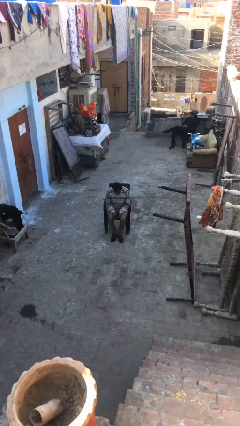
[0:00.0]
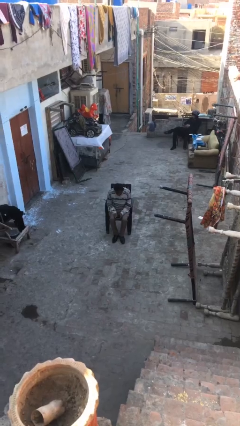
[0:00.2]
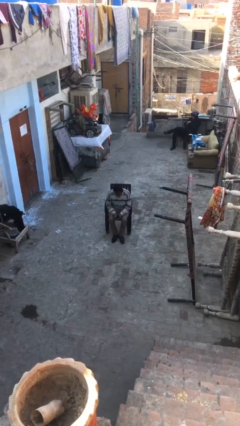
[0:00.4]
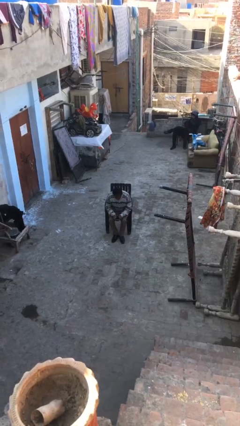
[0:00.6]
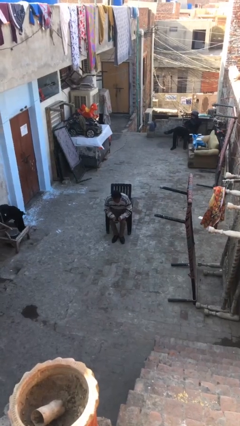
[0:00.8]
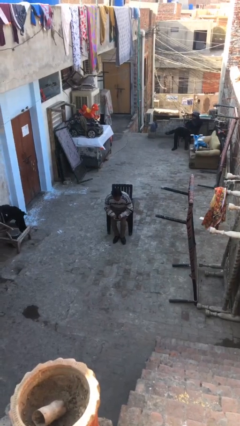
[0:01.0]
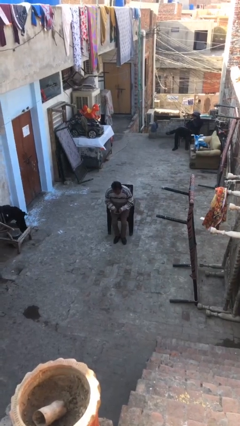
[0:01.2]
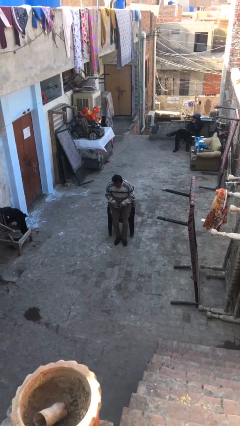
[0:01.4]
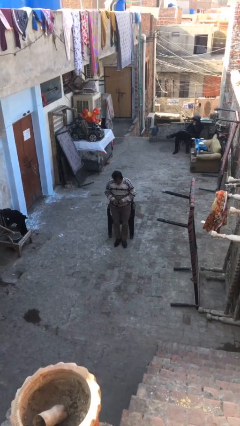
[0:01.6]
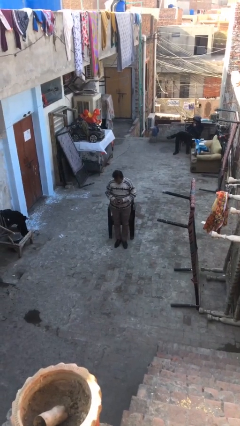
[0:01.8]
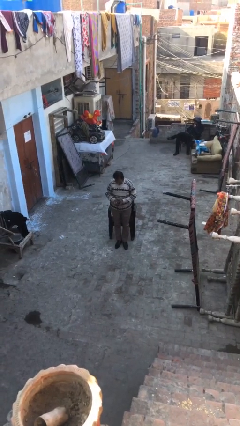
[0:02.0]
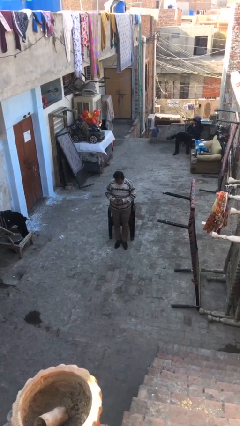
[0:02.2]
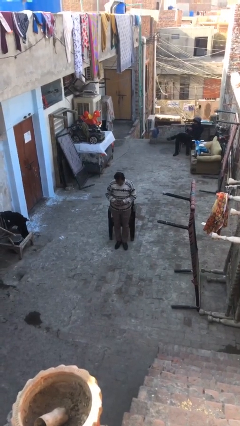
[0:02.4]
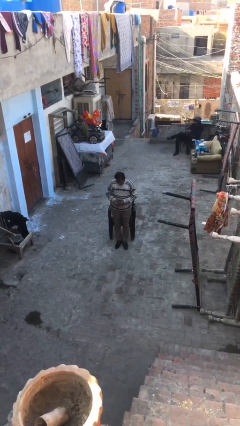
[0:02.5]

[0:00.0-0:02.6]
person stands up

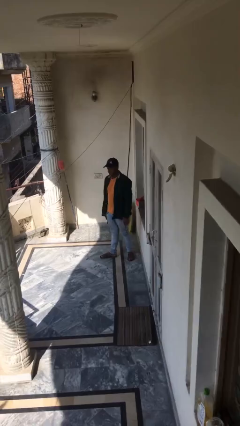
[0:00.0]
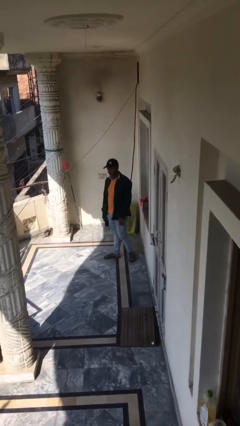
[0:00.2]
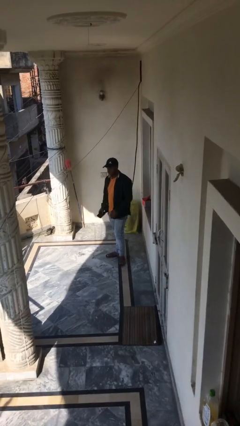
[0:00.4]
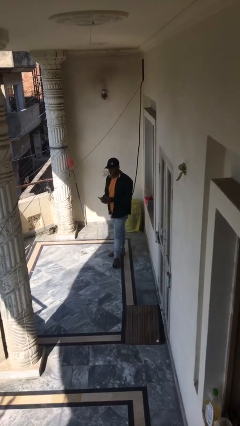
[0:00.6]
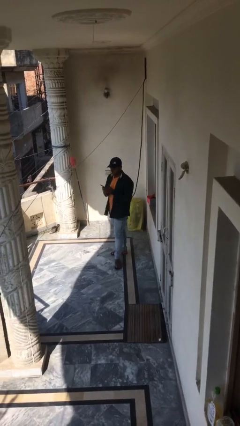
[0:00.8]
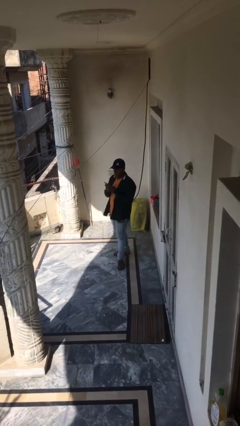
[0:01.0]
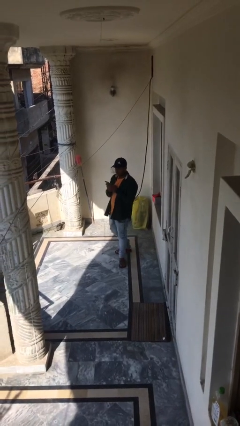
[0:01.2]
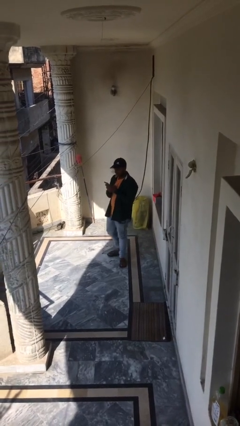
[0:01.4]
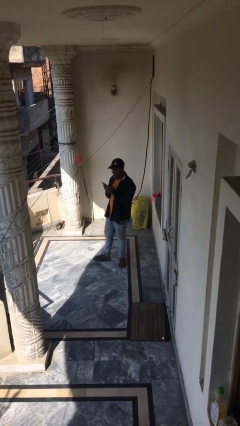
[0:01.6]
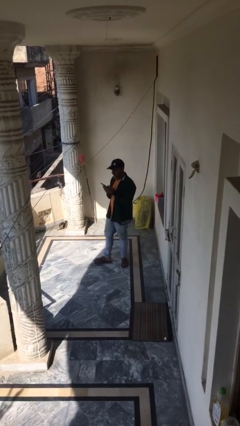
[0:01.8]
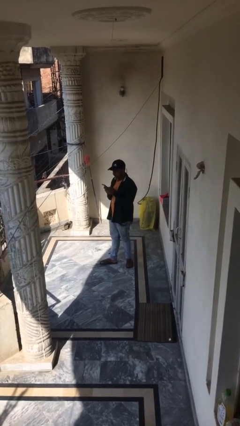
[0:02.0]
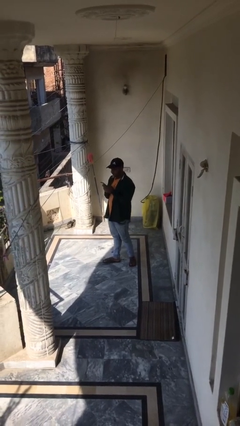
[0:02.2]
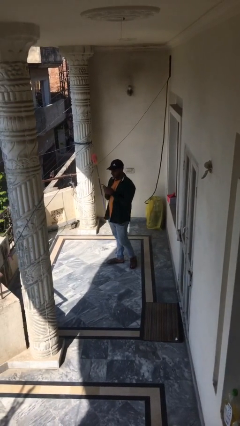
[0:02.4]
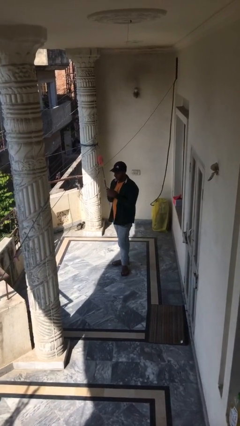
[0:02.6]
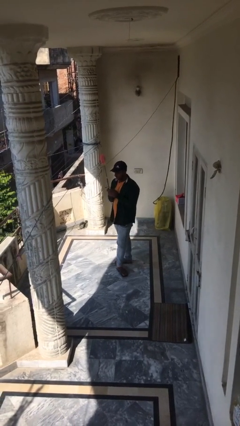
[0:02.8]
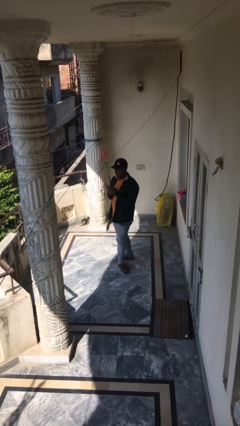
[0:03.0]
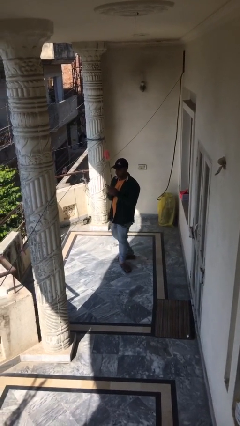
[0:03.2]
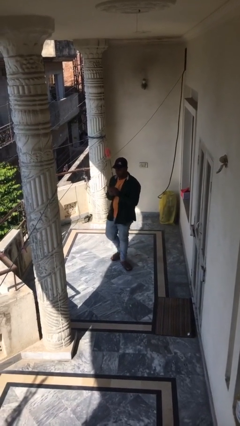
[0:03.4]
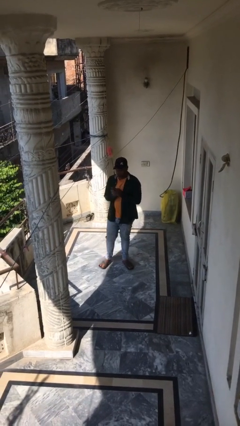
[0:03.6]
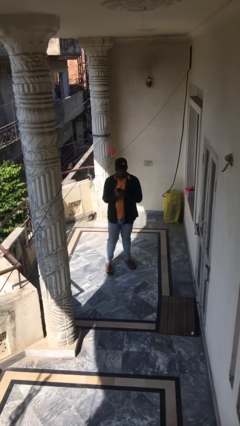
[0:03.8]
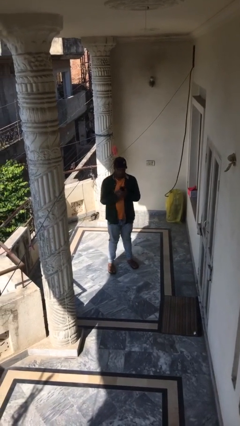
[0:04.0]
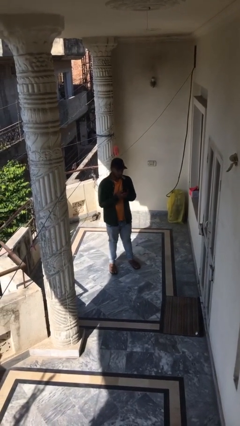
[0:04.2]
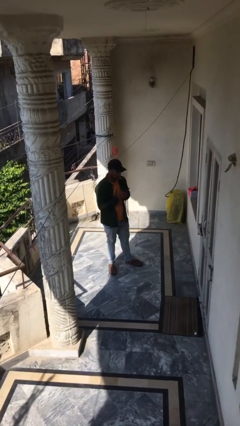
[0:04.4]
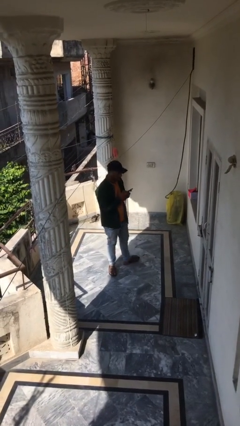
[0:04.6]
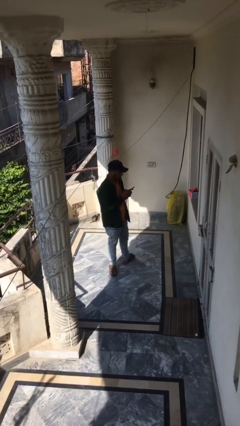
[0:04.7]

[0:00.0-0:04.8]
person texts on phone

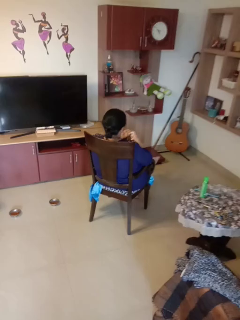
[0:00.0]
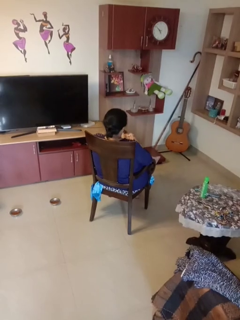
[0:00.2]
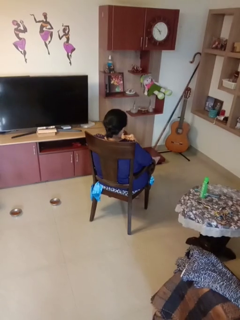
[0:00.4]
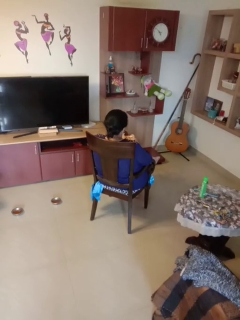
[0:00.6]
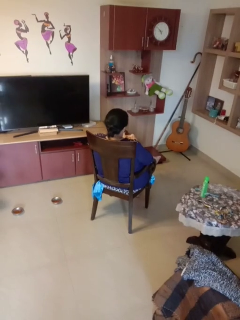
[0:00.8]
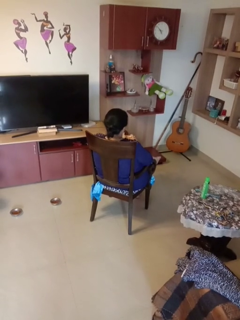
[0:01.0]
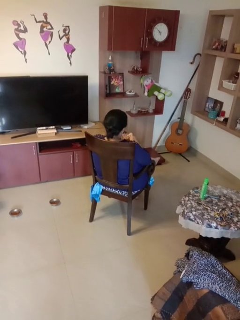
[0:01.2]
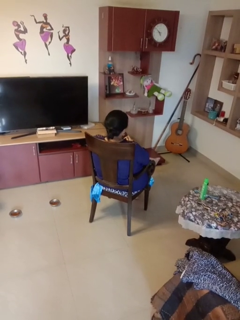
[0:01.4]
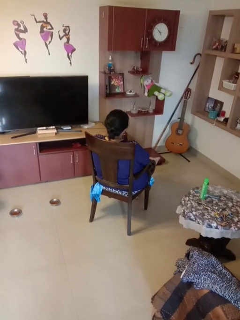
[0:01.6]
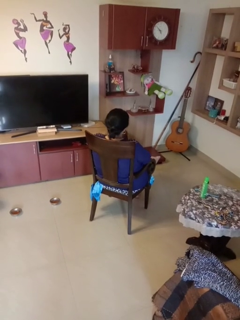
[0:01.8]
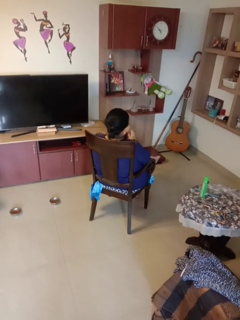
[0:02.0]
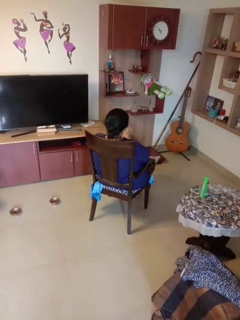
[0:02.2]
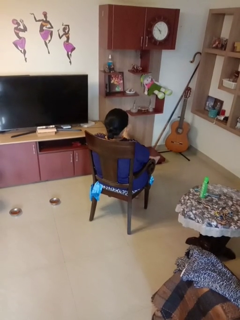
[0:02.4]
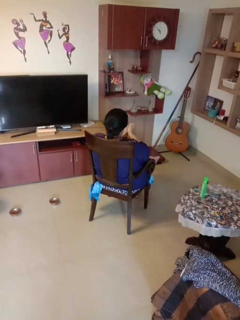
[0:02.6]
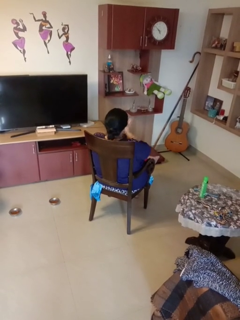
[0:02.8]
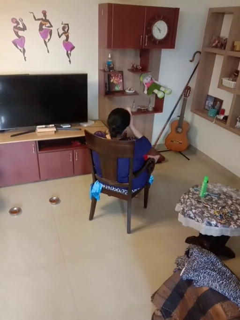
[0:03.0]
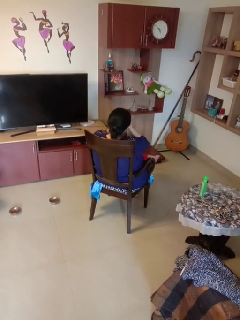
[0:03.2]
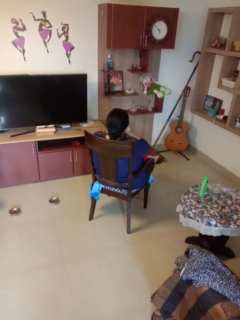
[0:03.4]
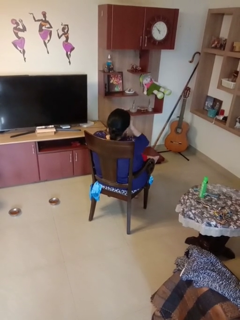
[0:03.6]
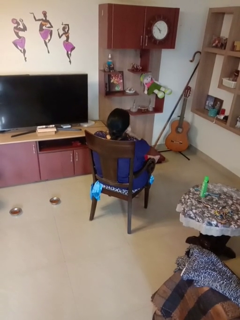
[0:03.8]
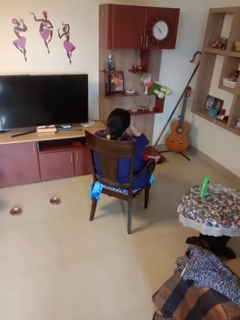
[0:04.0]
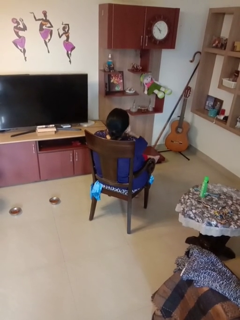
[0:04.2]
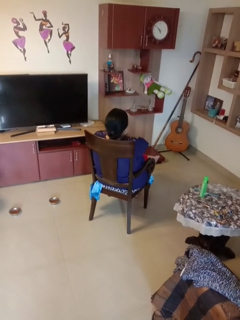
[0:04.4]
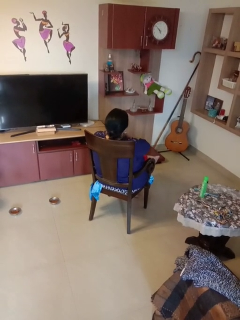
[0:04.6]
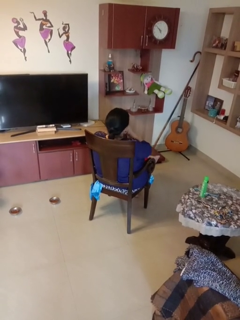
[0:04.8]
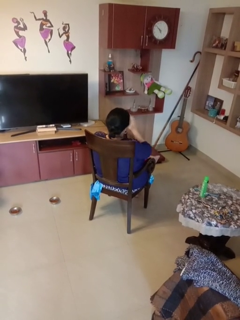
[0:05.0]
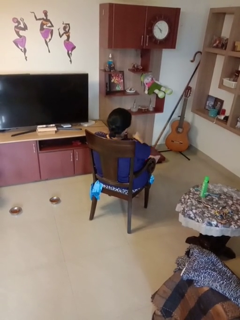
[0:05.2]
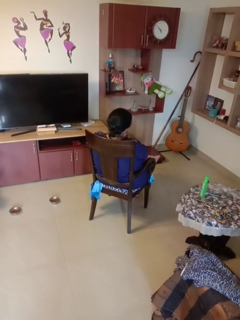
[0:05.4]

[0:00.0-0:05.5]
person applies facial moisturizer

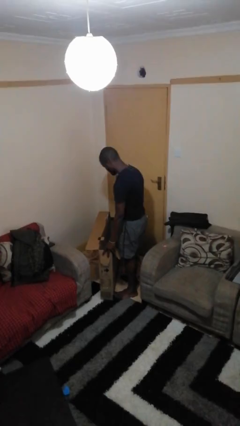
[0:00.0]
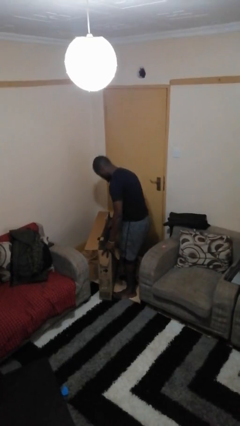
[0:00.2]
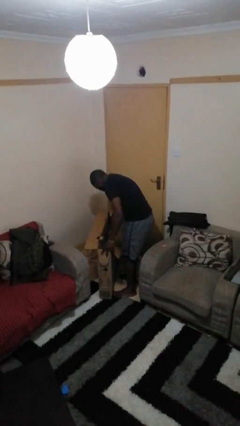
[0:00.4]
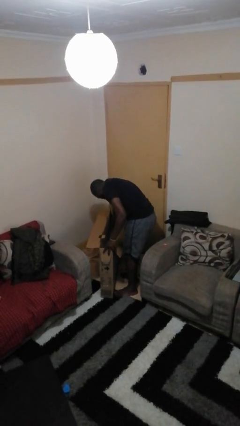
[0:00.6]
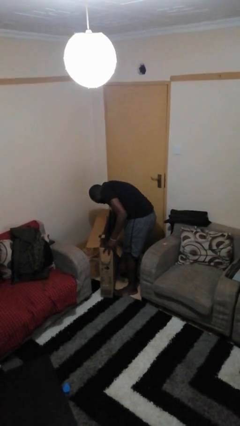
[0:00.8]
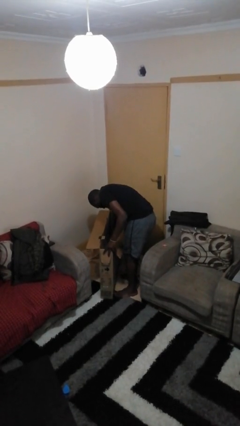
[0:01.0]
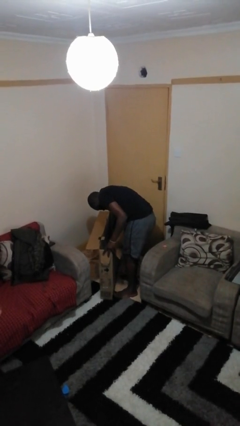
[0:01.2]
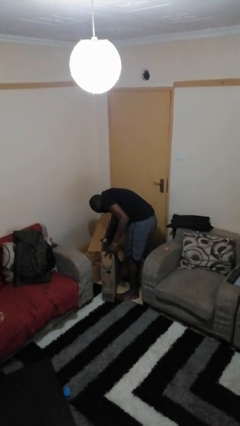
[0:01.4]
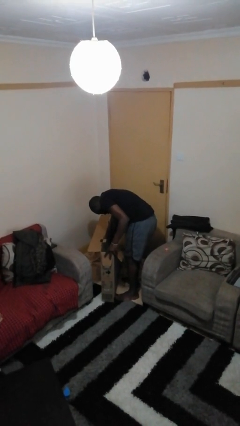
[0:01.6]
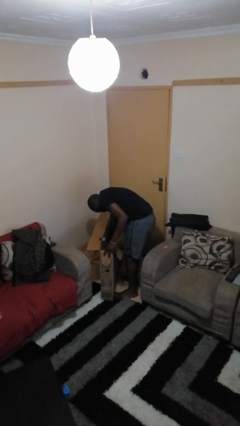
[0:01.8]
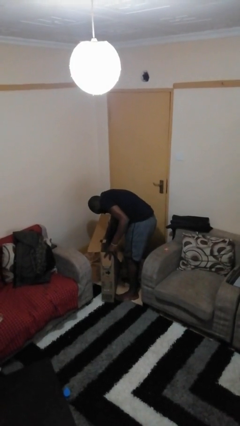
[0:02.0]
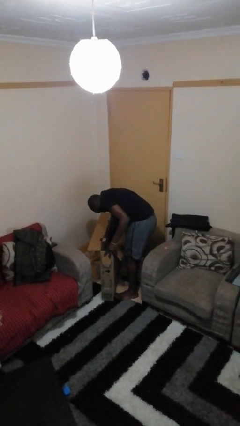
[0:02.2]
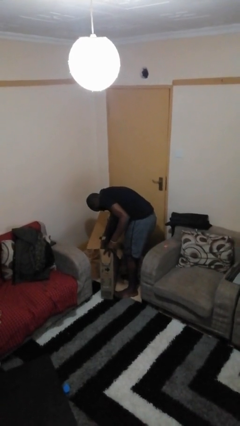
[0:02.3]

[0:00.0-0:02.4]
person searches in box

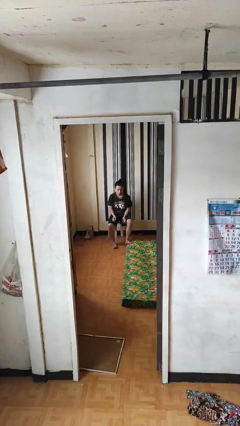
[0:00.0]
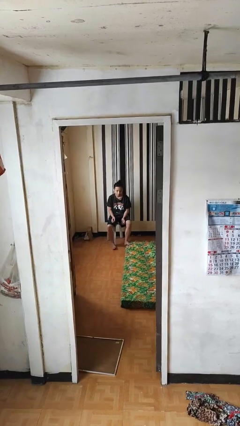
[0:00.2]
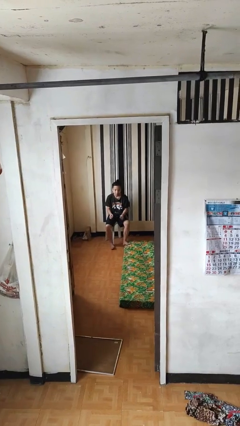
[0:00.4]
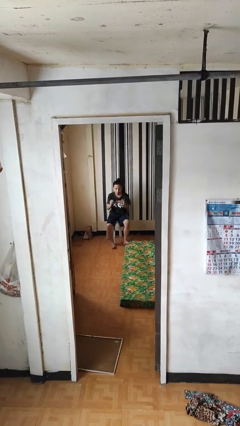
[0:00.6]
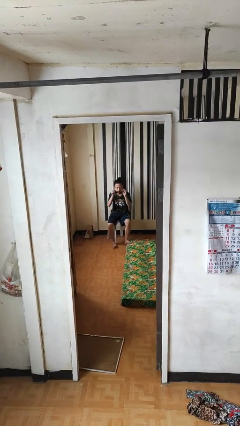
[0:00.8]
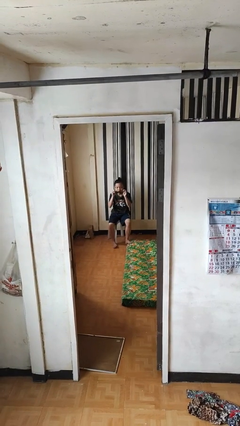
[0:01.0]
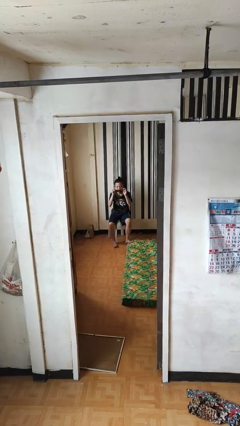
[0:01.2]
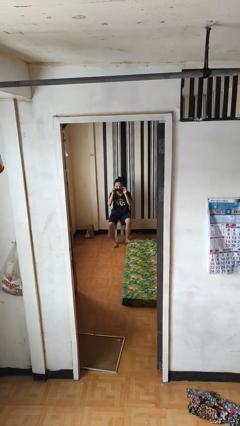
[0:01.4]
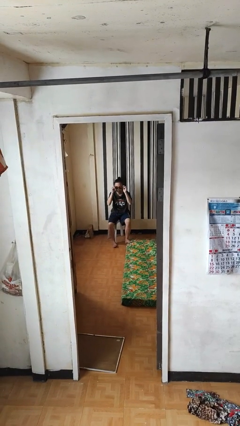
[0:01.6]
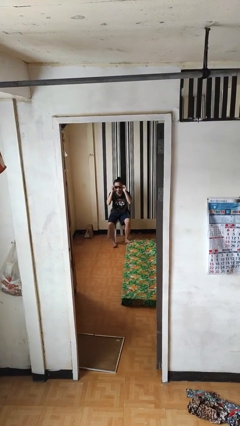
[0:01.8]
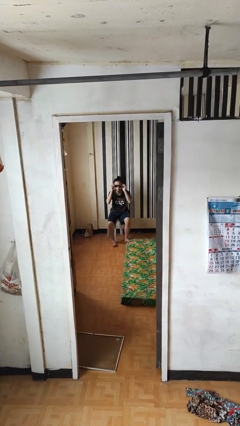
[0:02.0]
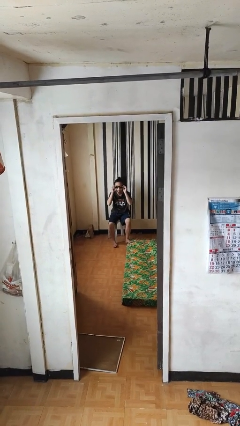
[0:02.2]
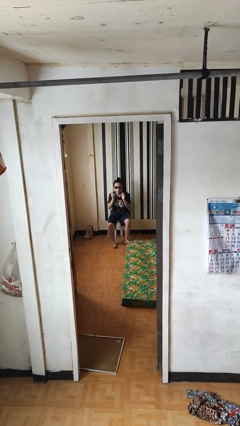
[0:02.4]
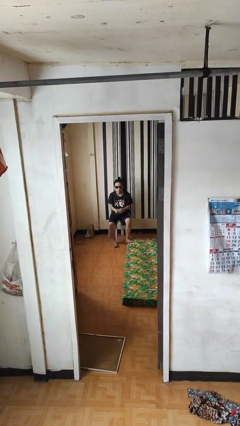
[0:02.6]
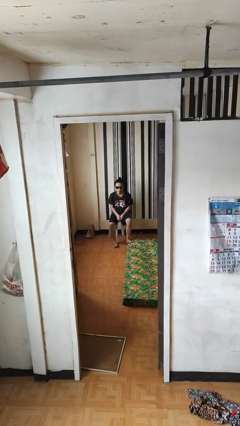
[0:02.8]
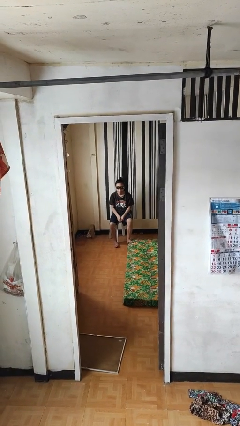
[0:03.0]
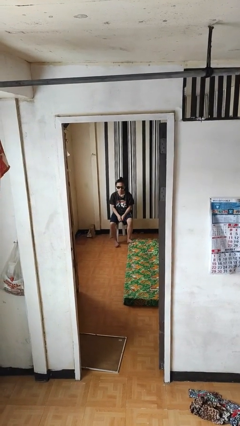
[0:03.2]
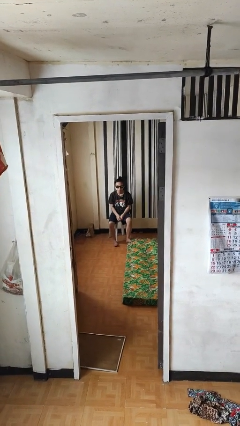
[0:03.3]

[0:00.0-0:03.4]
person puts on sunglasses

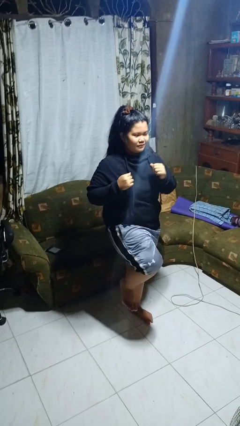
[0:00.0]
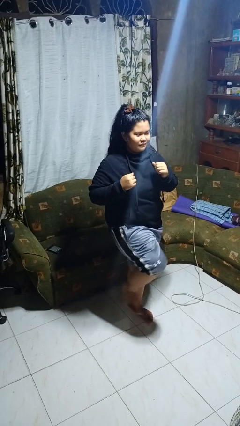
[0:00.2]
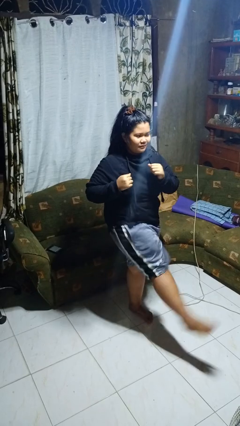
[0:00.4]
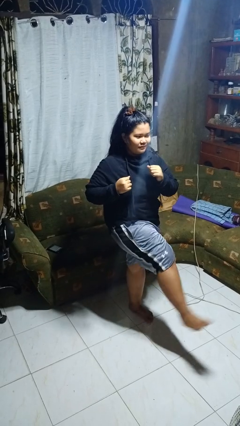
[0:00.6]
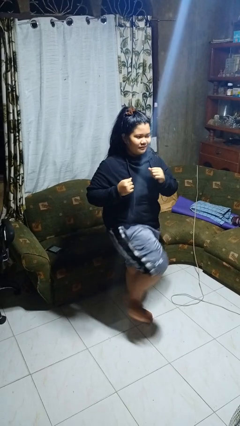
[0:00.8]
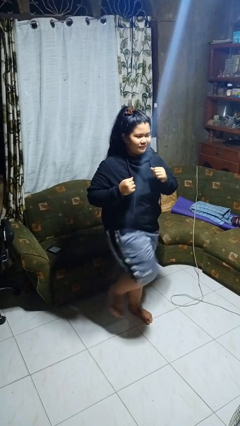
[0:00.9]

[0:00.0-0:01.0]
person karate kicks
